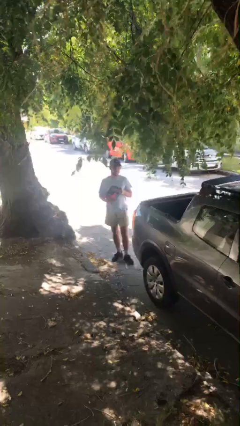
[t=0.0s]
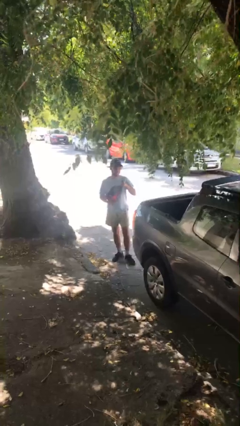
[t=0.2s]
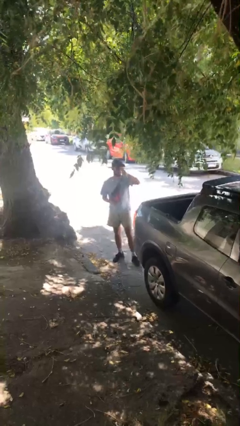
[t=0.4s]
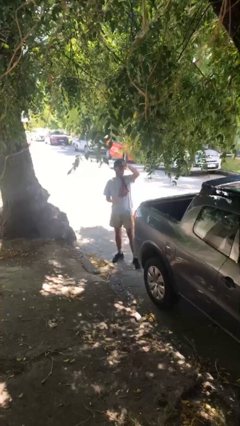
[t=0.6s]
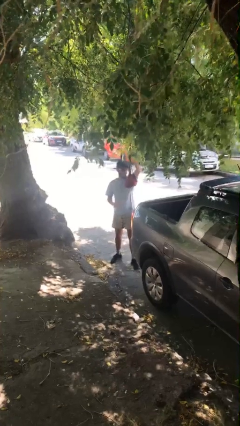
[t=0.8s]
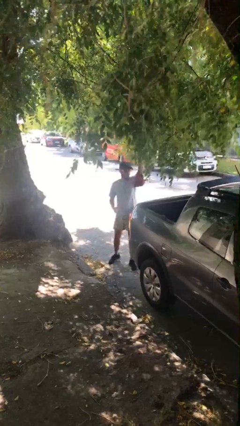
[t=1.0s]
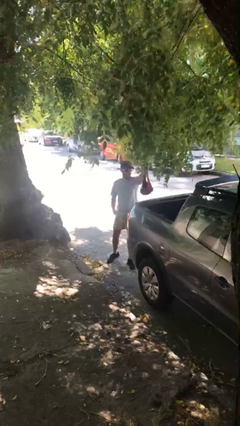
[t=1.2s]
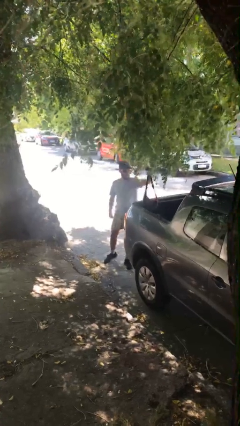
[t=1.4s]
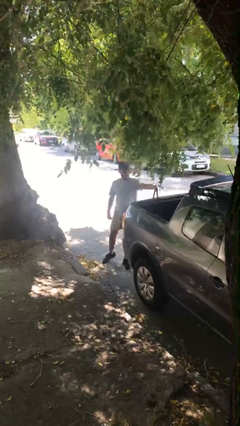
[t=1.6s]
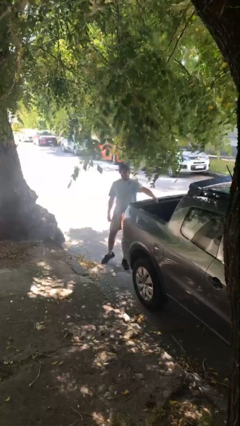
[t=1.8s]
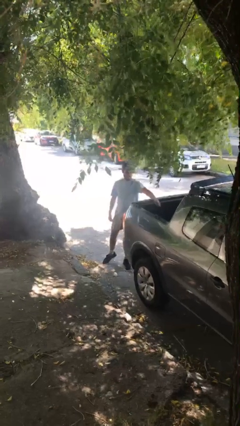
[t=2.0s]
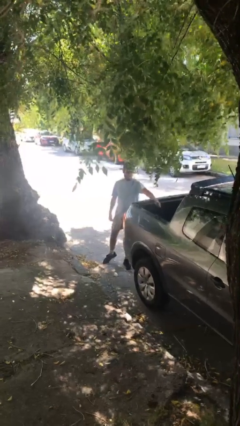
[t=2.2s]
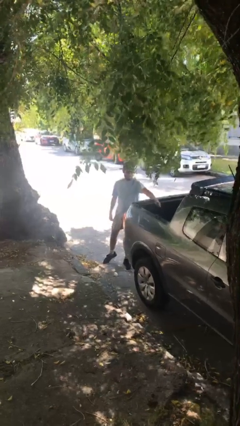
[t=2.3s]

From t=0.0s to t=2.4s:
person loads car

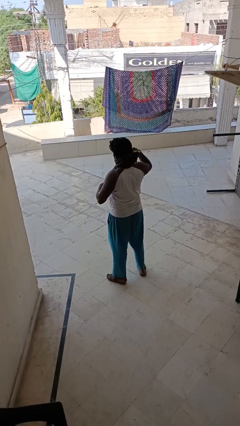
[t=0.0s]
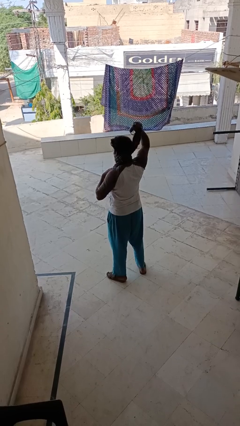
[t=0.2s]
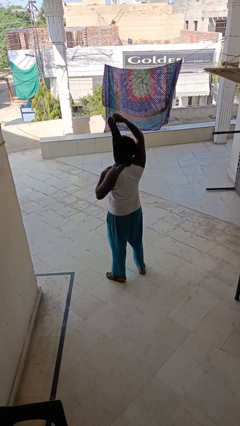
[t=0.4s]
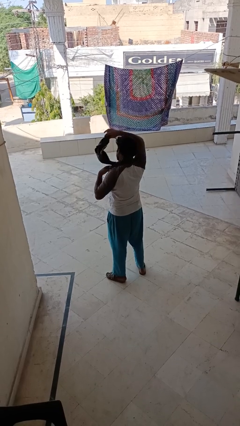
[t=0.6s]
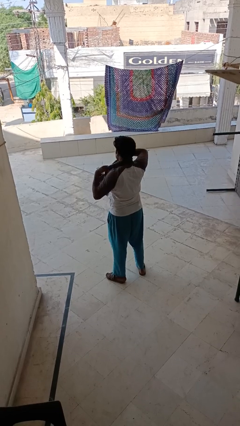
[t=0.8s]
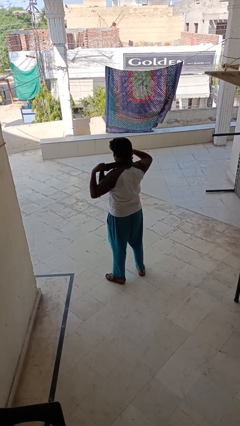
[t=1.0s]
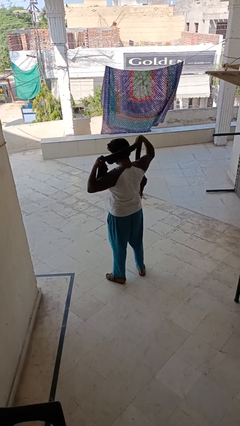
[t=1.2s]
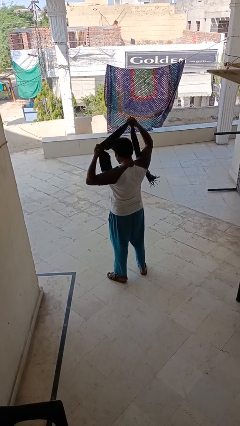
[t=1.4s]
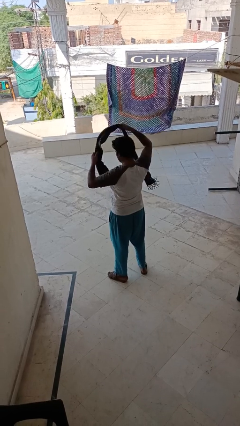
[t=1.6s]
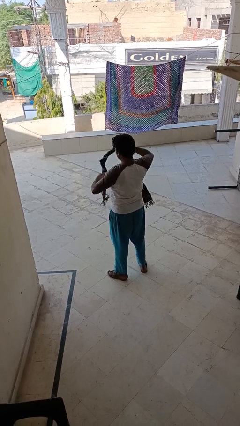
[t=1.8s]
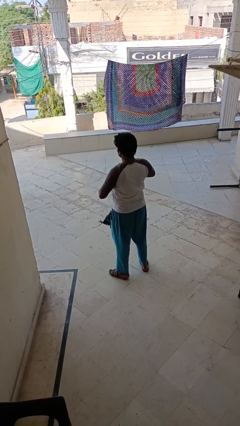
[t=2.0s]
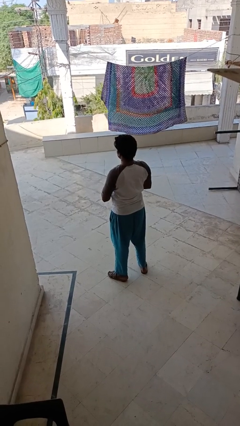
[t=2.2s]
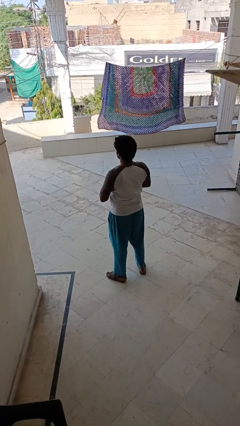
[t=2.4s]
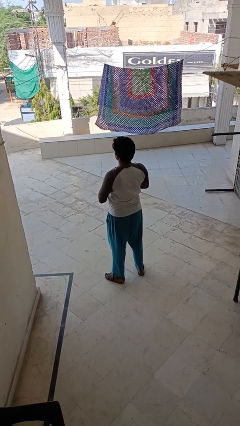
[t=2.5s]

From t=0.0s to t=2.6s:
person takes off scarf

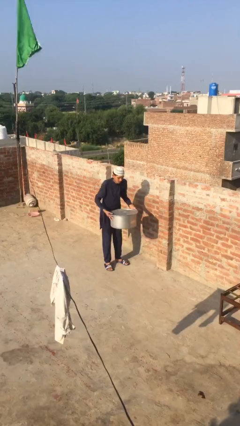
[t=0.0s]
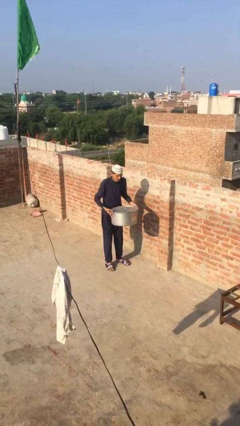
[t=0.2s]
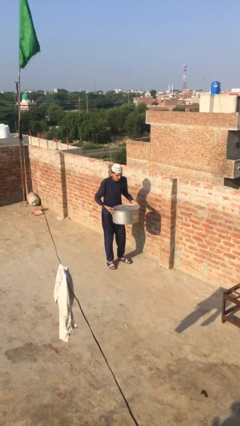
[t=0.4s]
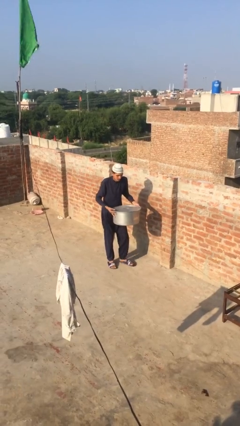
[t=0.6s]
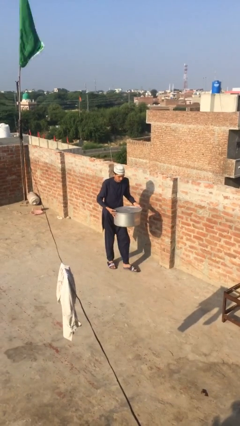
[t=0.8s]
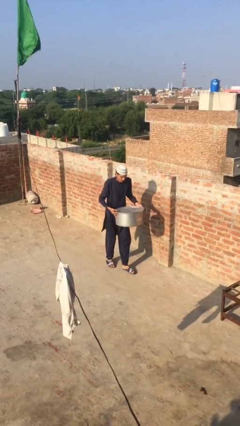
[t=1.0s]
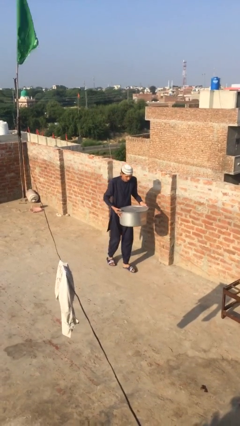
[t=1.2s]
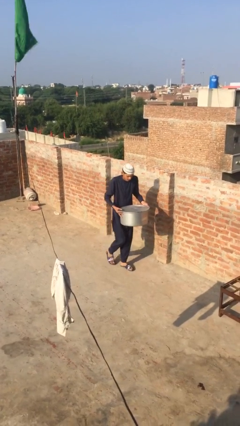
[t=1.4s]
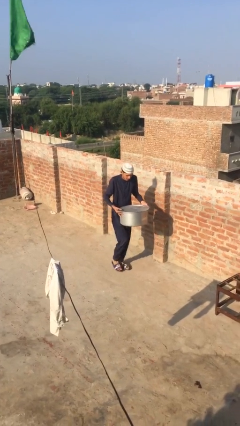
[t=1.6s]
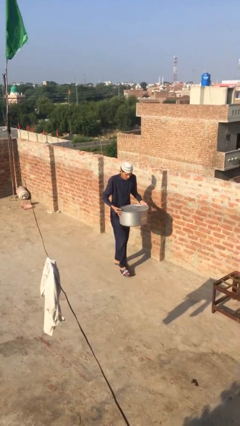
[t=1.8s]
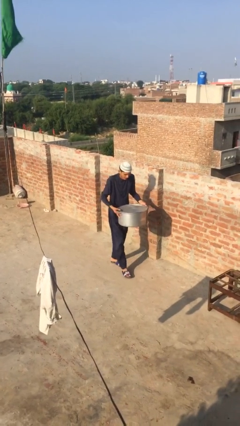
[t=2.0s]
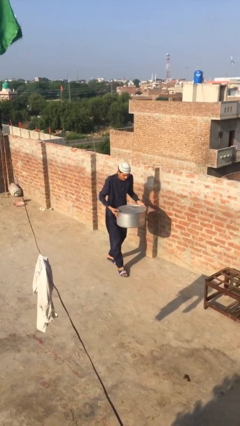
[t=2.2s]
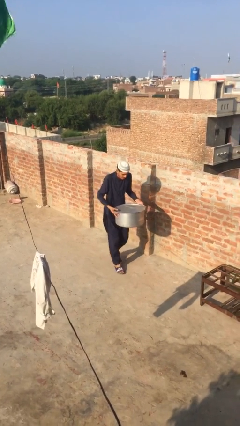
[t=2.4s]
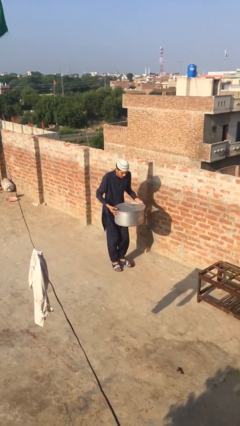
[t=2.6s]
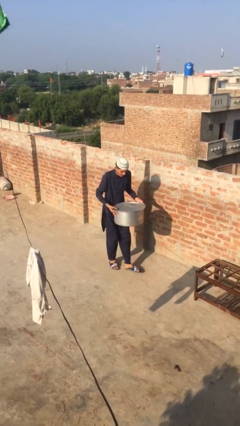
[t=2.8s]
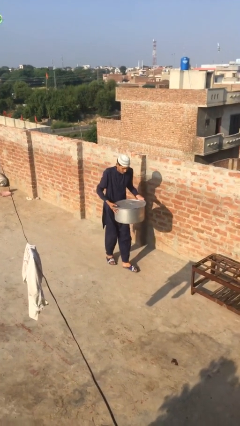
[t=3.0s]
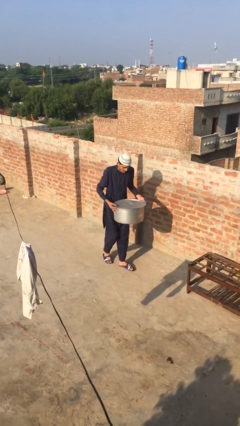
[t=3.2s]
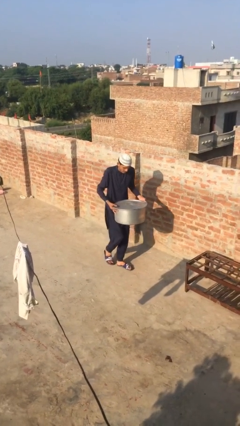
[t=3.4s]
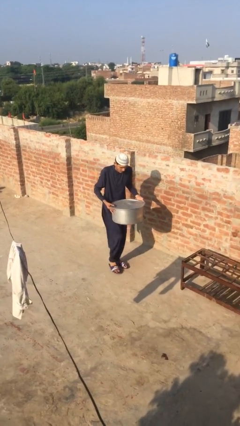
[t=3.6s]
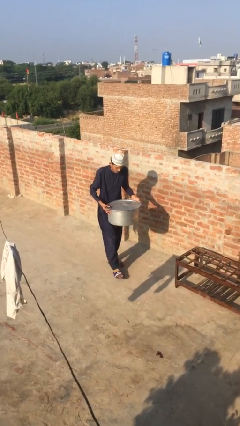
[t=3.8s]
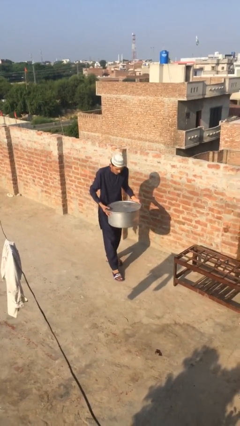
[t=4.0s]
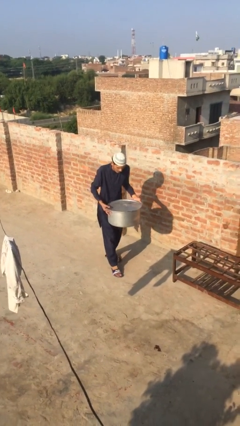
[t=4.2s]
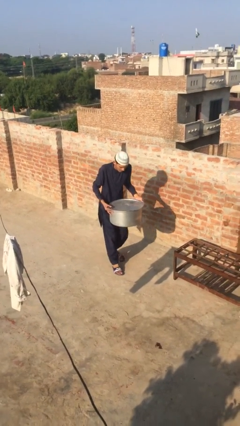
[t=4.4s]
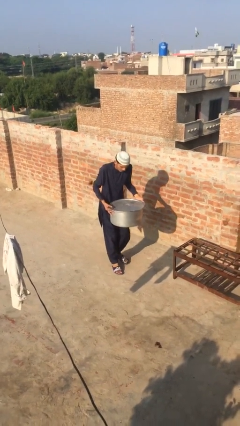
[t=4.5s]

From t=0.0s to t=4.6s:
person carries heavy object

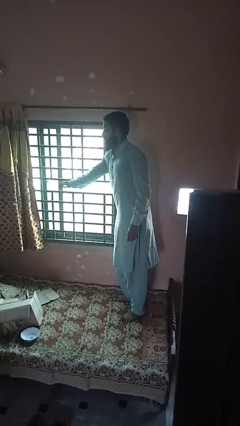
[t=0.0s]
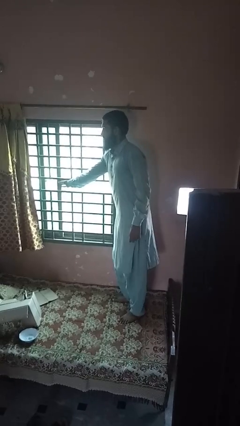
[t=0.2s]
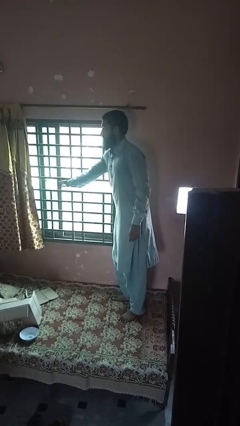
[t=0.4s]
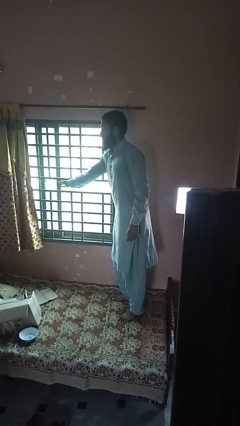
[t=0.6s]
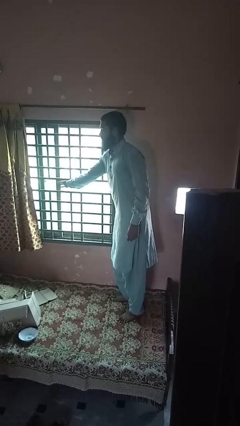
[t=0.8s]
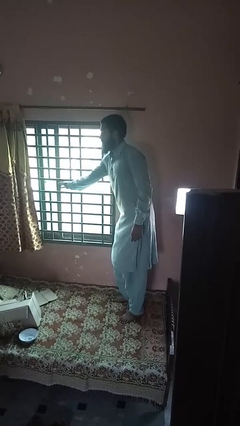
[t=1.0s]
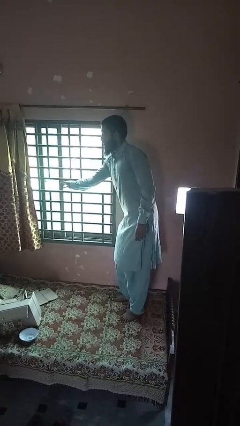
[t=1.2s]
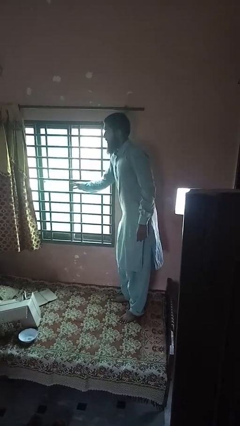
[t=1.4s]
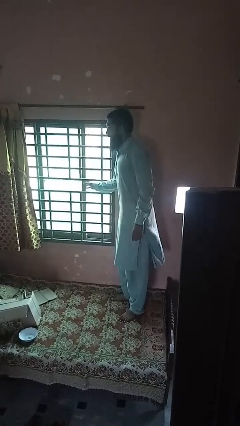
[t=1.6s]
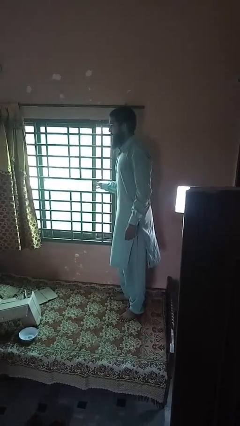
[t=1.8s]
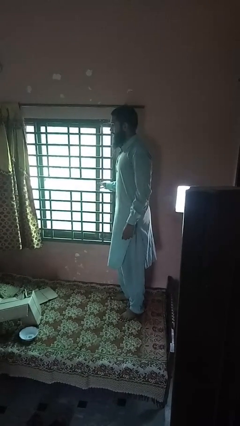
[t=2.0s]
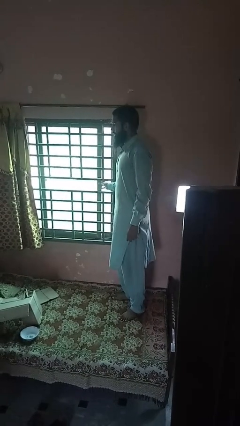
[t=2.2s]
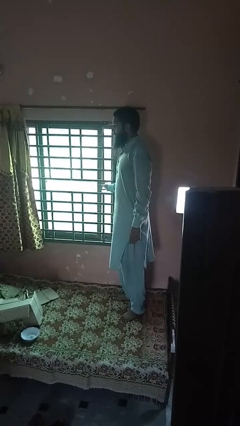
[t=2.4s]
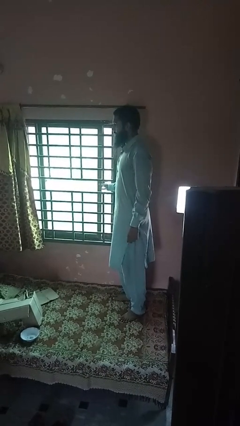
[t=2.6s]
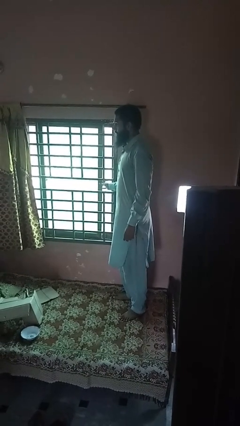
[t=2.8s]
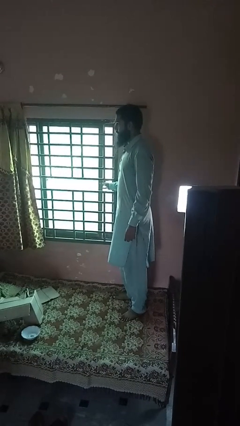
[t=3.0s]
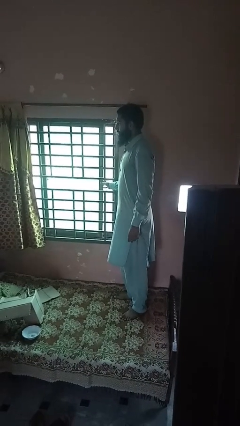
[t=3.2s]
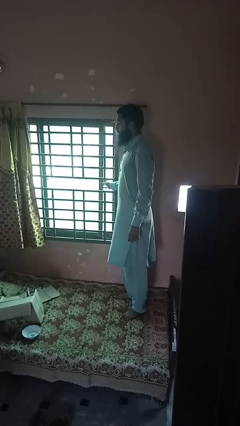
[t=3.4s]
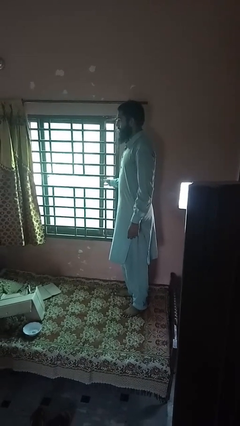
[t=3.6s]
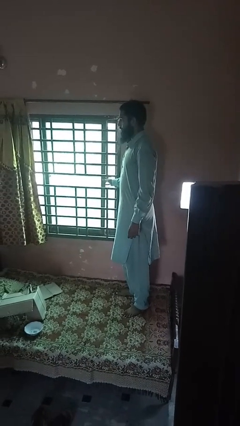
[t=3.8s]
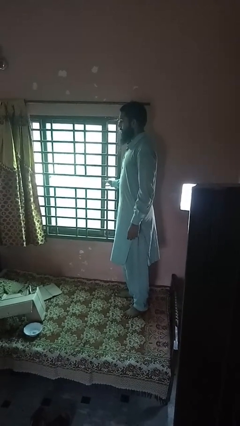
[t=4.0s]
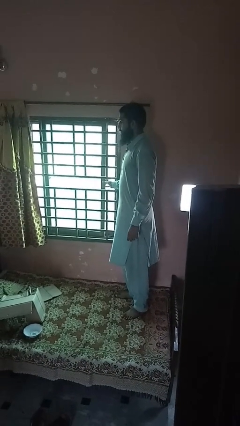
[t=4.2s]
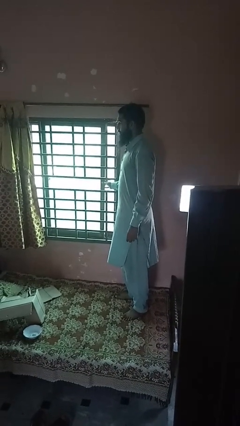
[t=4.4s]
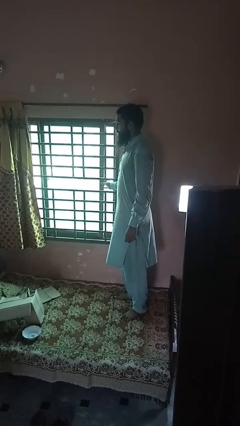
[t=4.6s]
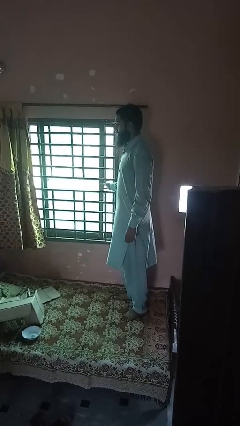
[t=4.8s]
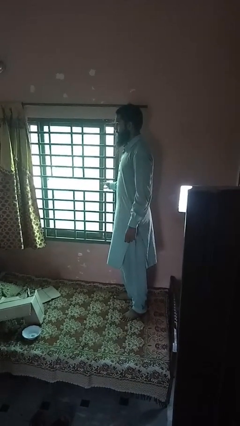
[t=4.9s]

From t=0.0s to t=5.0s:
person closes home window

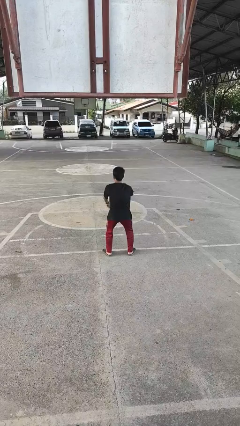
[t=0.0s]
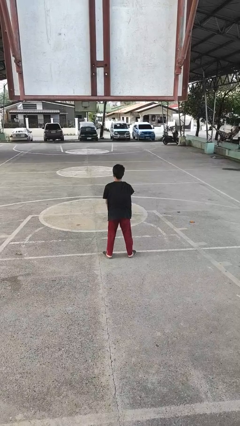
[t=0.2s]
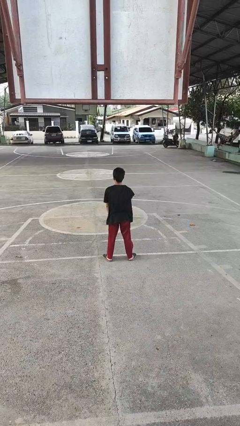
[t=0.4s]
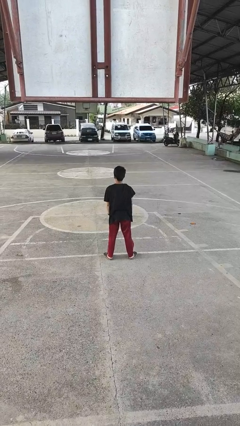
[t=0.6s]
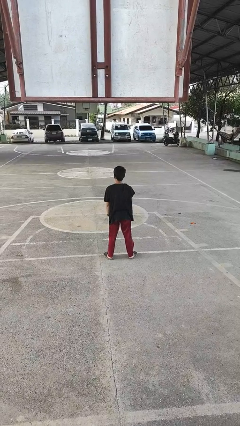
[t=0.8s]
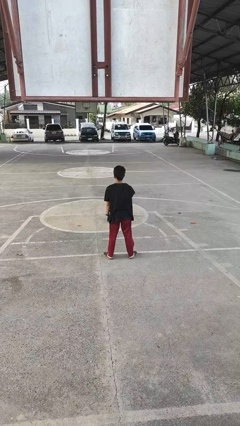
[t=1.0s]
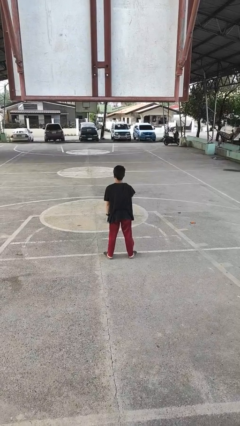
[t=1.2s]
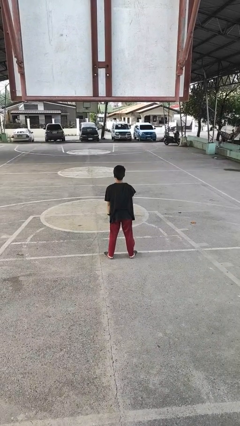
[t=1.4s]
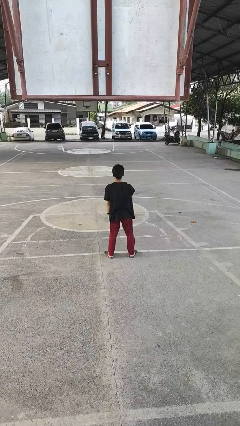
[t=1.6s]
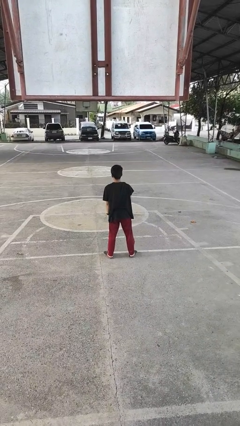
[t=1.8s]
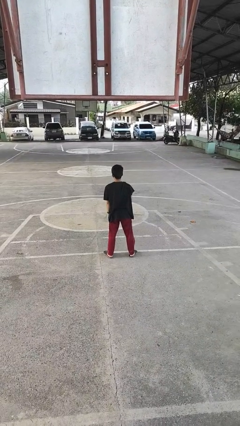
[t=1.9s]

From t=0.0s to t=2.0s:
person stands up

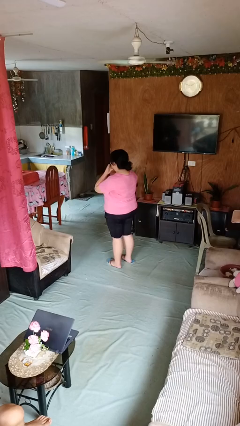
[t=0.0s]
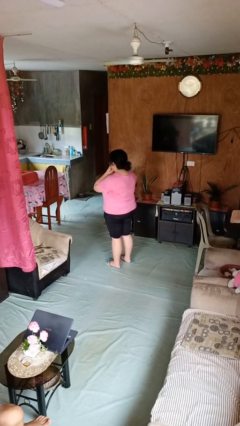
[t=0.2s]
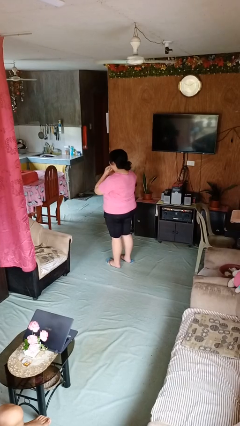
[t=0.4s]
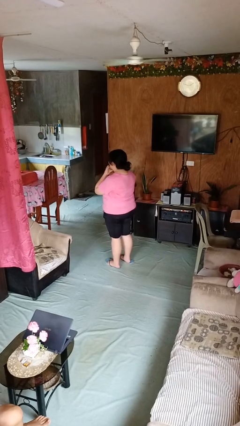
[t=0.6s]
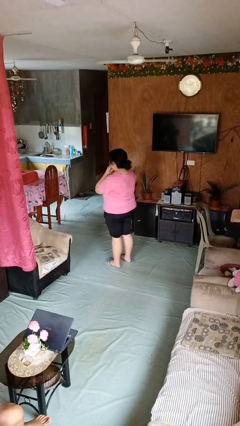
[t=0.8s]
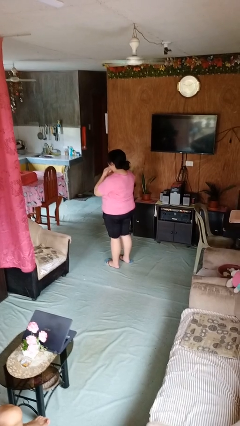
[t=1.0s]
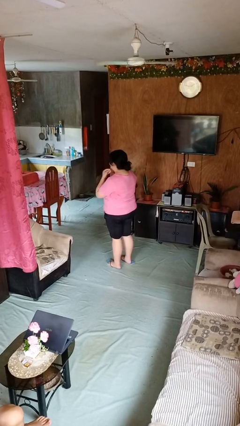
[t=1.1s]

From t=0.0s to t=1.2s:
person strokes chin
